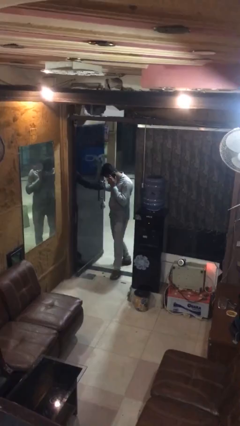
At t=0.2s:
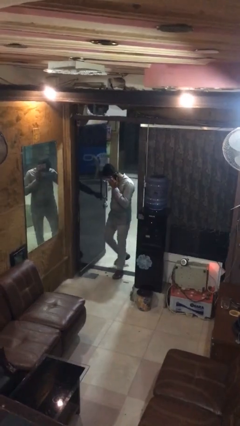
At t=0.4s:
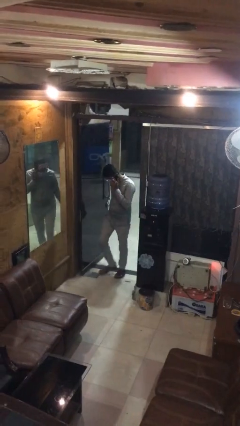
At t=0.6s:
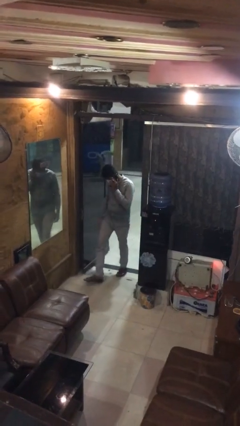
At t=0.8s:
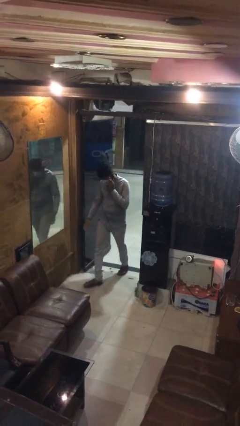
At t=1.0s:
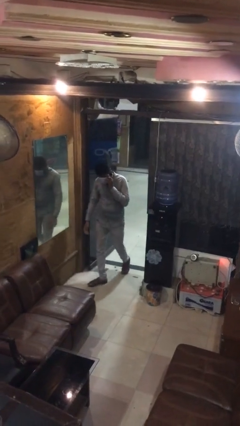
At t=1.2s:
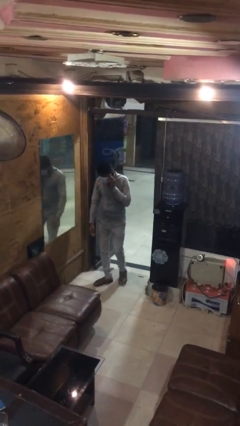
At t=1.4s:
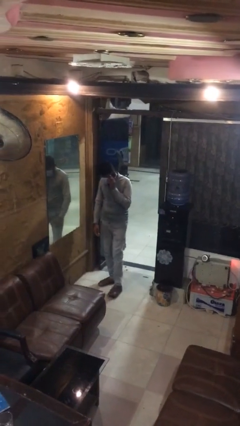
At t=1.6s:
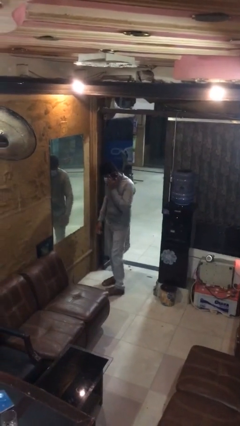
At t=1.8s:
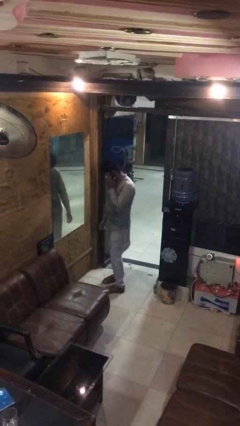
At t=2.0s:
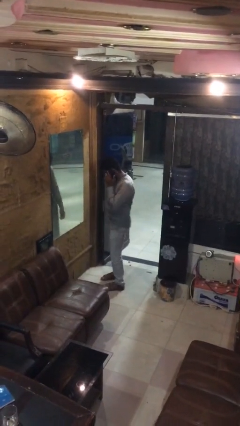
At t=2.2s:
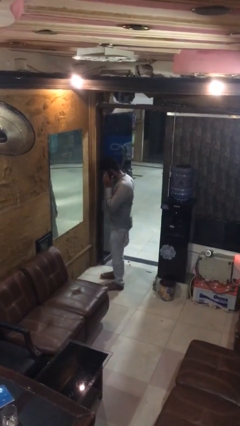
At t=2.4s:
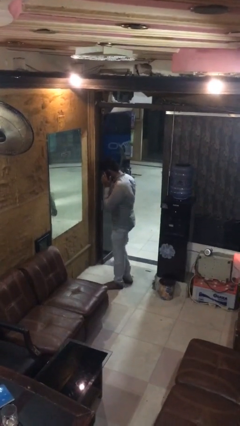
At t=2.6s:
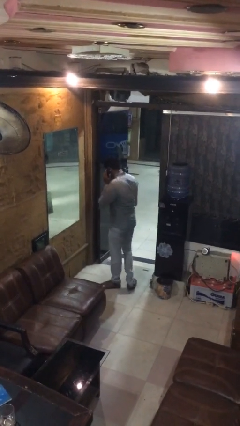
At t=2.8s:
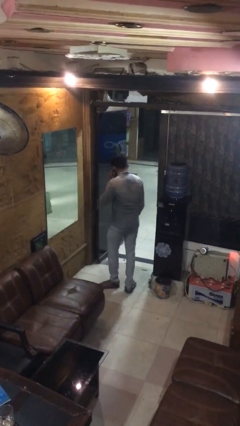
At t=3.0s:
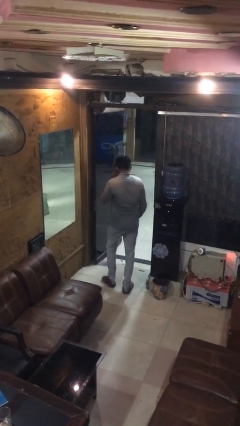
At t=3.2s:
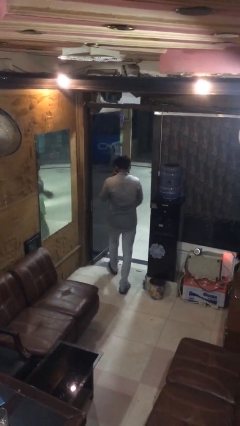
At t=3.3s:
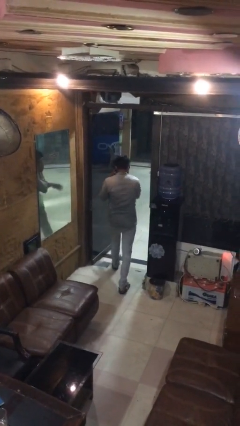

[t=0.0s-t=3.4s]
person enters scene through structure

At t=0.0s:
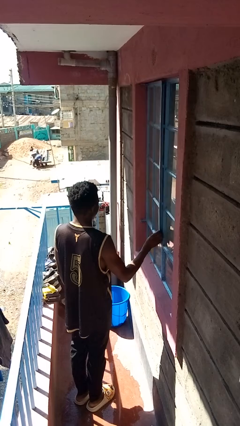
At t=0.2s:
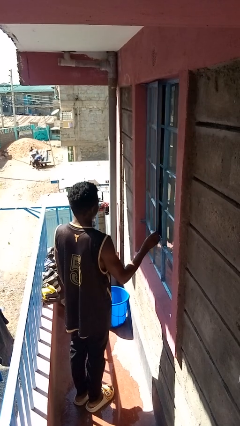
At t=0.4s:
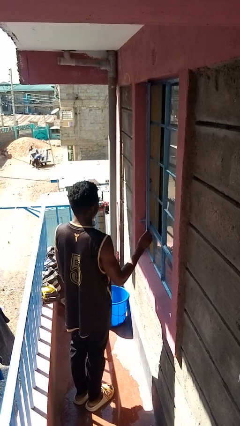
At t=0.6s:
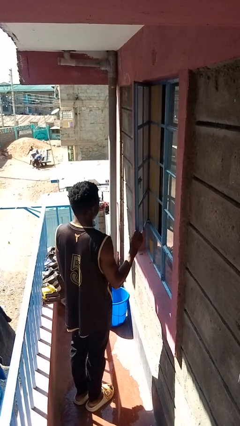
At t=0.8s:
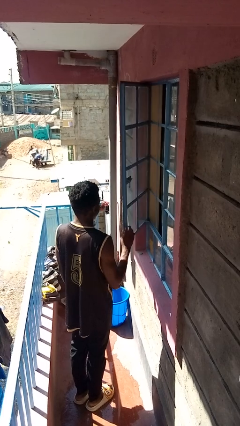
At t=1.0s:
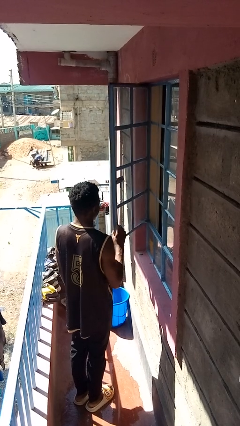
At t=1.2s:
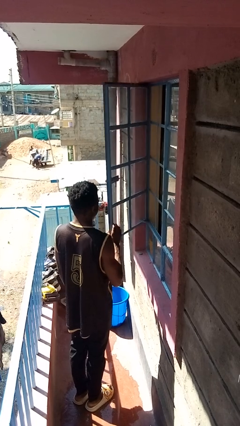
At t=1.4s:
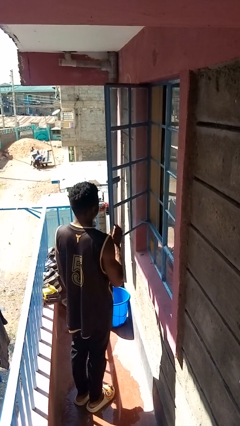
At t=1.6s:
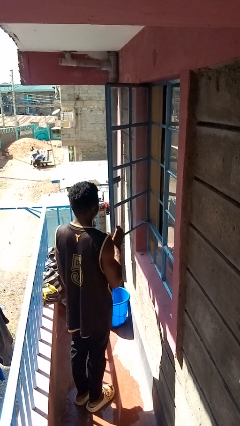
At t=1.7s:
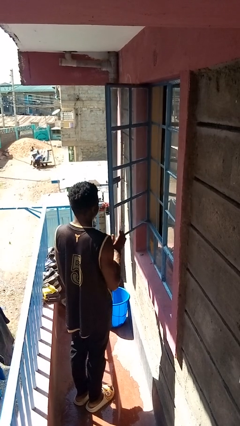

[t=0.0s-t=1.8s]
person opens home window

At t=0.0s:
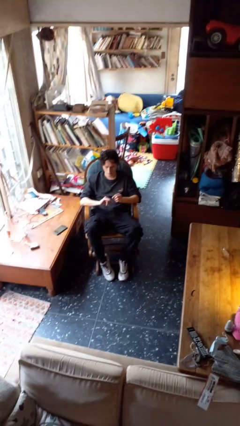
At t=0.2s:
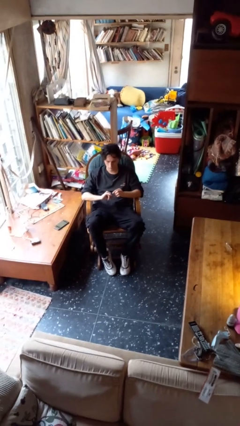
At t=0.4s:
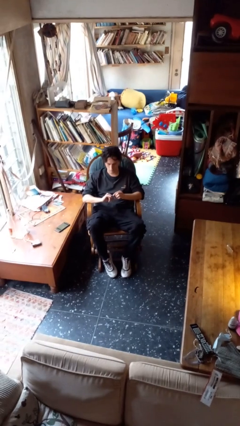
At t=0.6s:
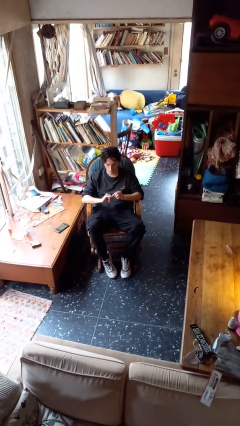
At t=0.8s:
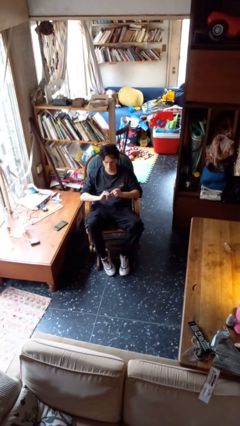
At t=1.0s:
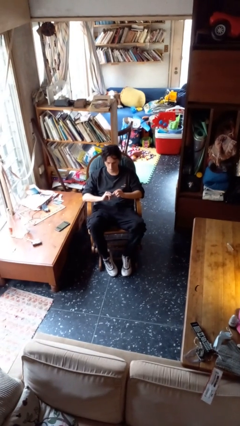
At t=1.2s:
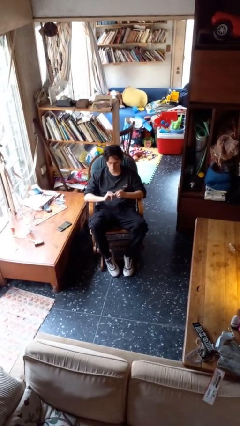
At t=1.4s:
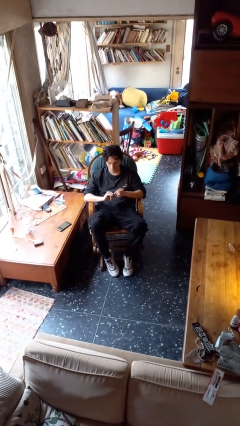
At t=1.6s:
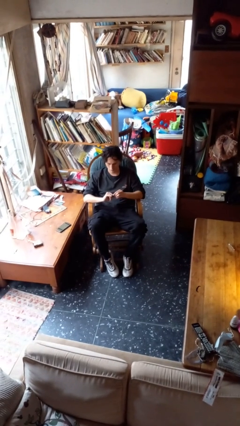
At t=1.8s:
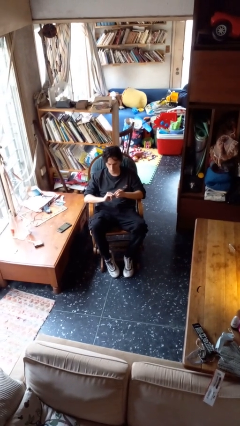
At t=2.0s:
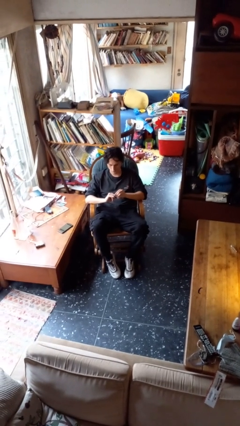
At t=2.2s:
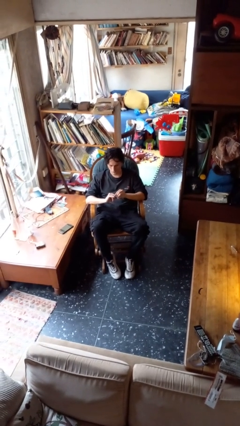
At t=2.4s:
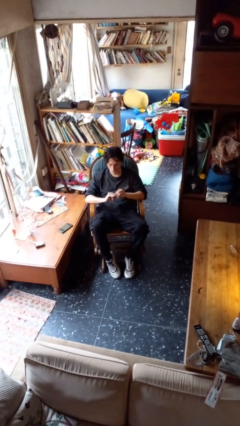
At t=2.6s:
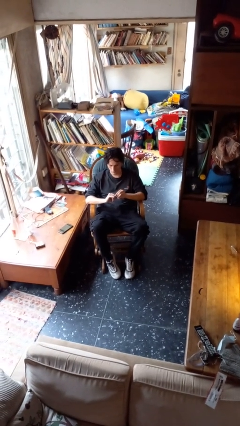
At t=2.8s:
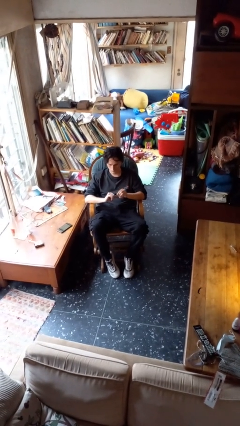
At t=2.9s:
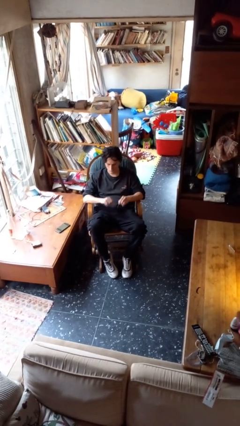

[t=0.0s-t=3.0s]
person files fingernails

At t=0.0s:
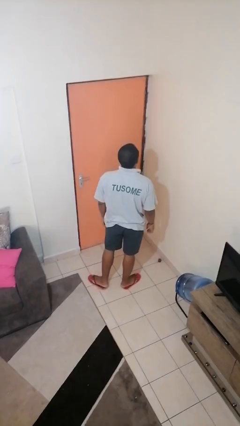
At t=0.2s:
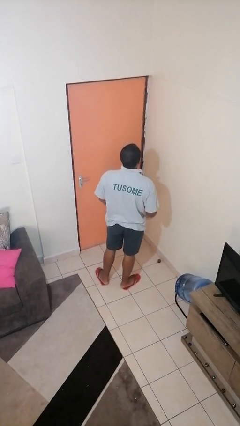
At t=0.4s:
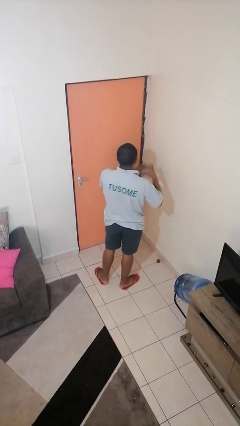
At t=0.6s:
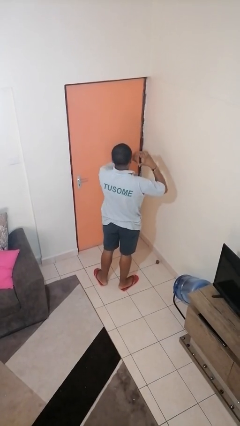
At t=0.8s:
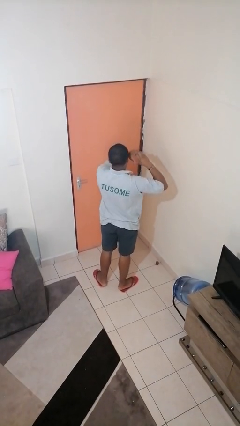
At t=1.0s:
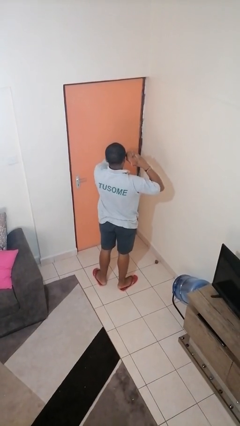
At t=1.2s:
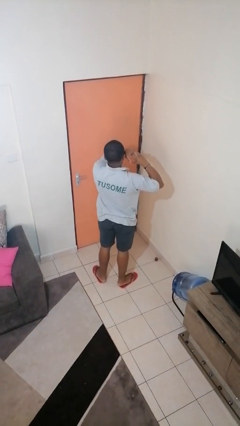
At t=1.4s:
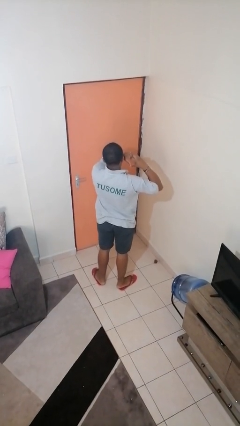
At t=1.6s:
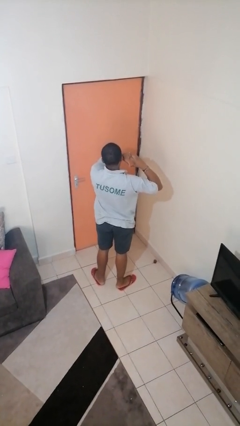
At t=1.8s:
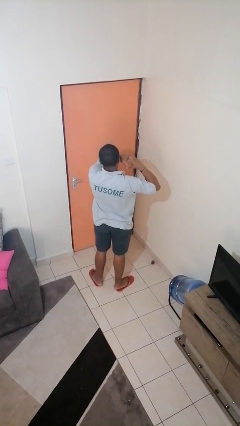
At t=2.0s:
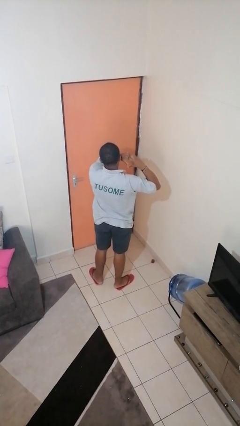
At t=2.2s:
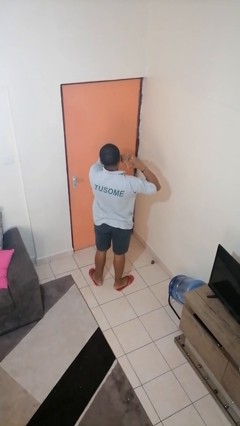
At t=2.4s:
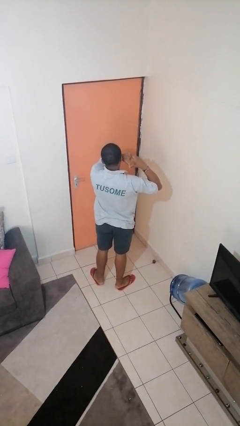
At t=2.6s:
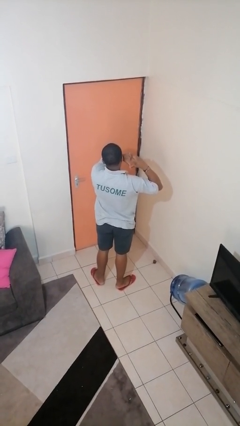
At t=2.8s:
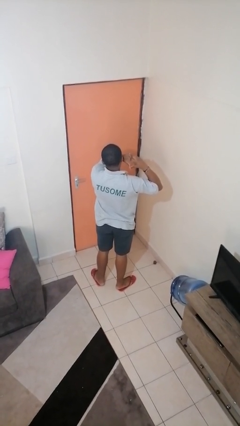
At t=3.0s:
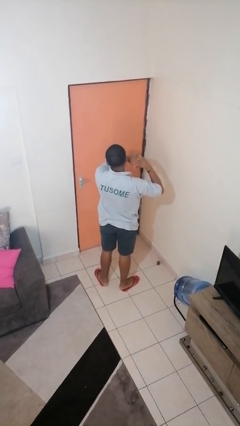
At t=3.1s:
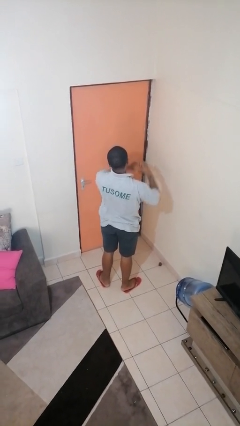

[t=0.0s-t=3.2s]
person gestures heart

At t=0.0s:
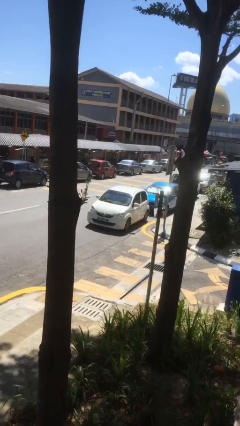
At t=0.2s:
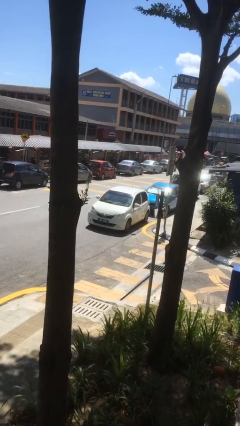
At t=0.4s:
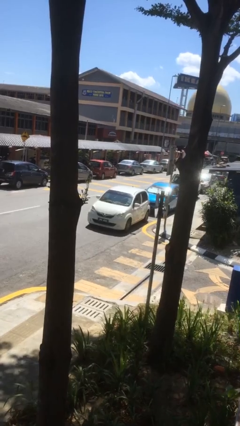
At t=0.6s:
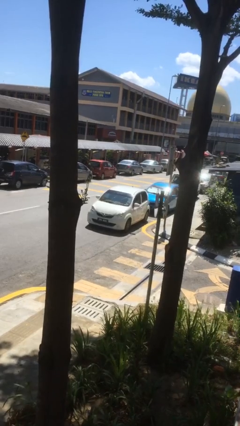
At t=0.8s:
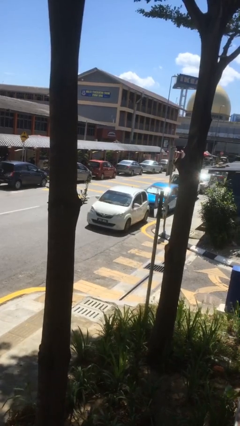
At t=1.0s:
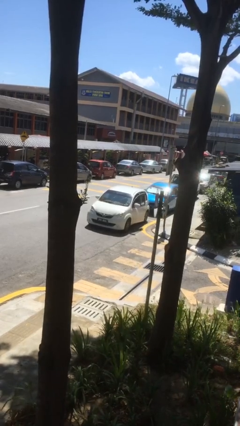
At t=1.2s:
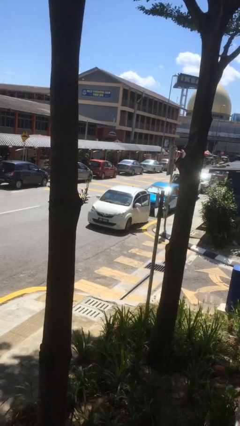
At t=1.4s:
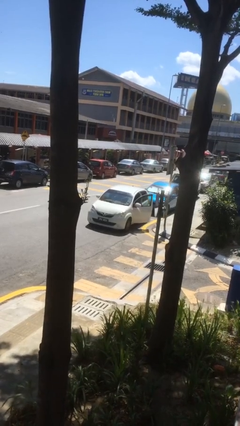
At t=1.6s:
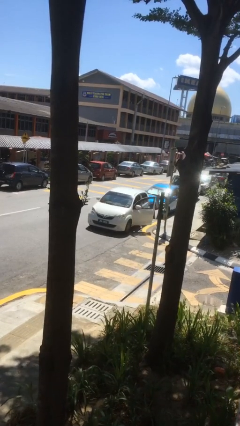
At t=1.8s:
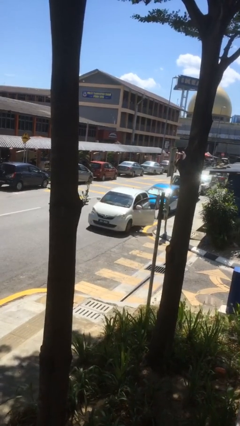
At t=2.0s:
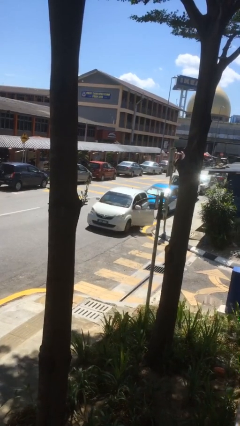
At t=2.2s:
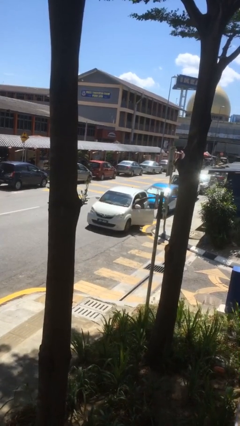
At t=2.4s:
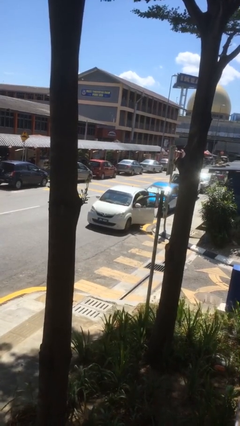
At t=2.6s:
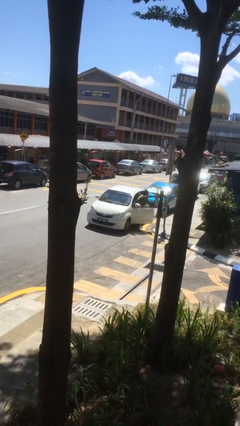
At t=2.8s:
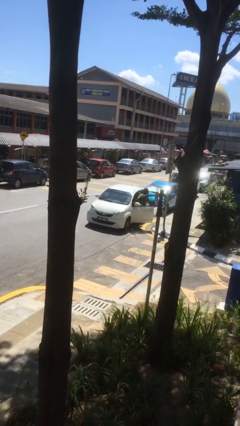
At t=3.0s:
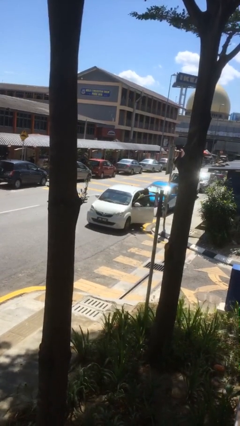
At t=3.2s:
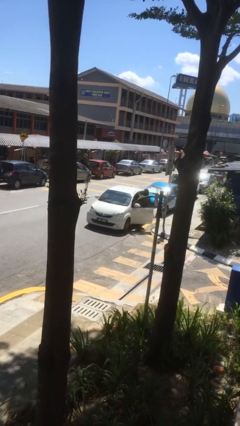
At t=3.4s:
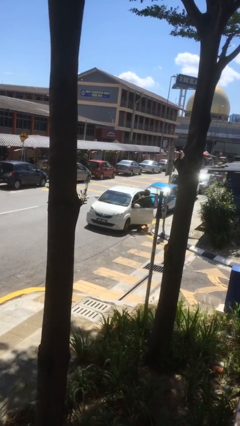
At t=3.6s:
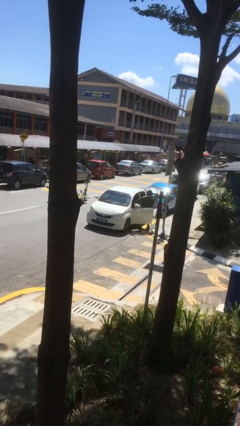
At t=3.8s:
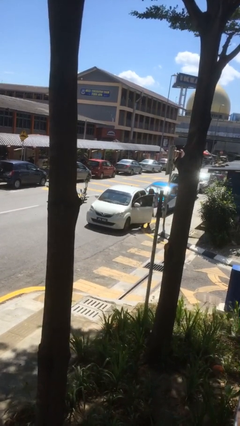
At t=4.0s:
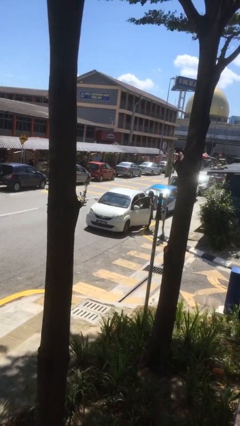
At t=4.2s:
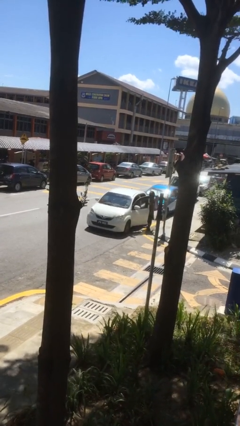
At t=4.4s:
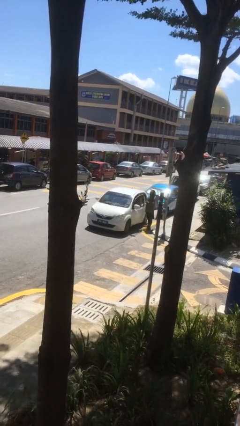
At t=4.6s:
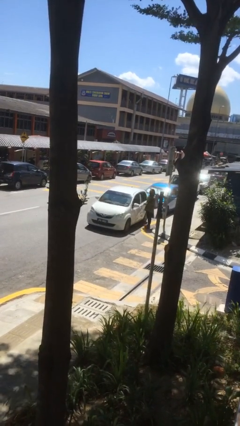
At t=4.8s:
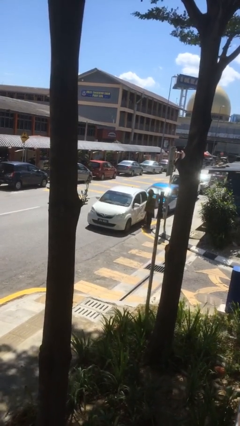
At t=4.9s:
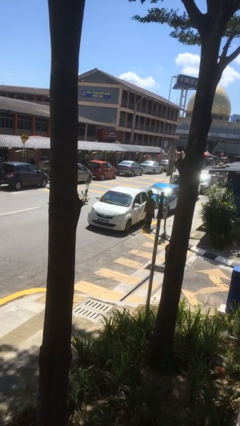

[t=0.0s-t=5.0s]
car drops off person

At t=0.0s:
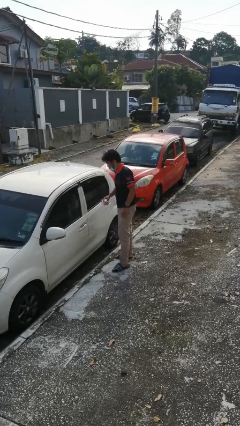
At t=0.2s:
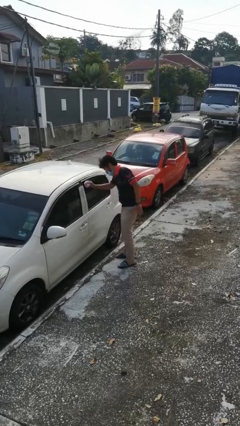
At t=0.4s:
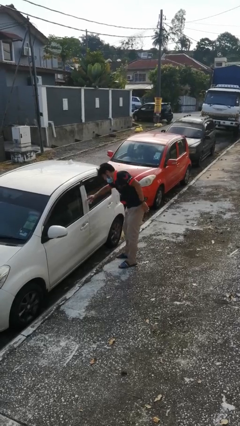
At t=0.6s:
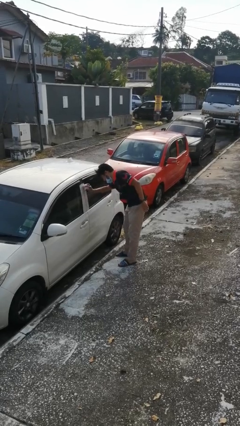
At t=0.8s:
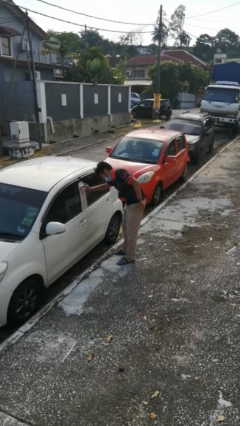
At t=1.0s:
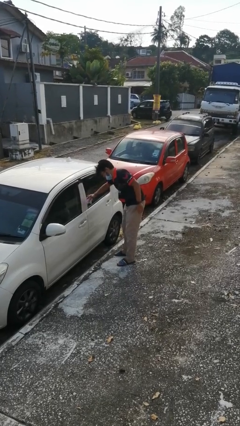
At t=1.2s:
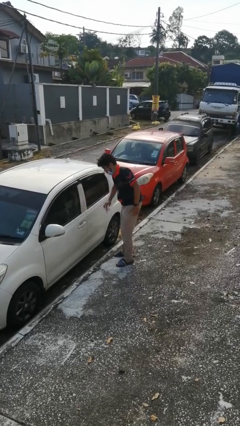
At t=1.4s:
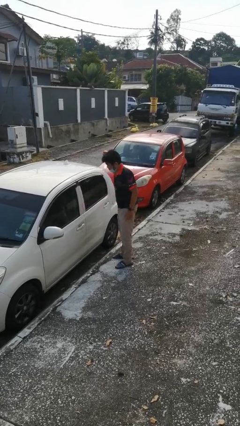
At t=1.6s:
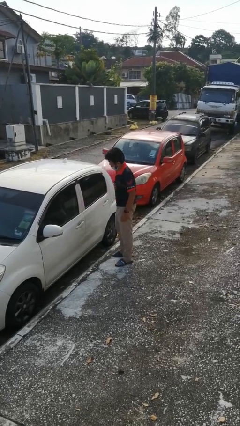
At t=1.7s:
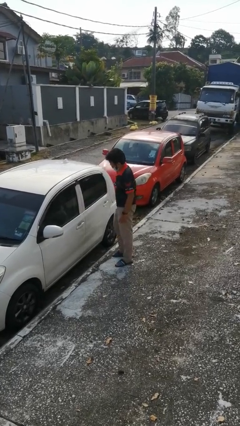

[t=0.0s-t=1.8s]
person polishes car with rag
